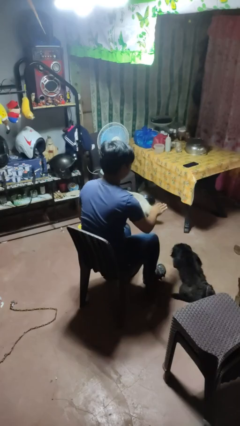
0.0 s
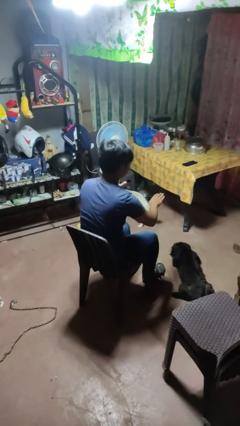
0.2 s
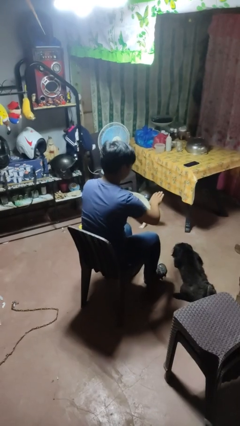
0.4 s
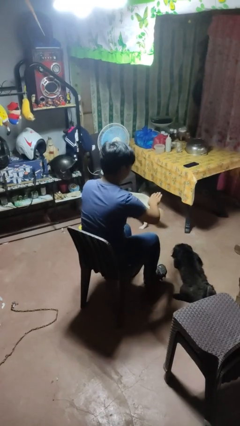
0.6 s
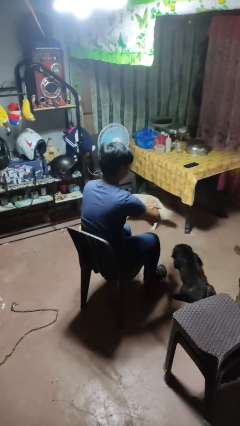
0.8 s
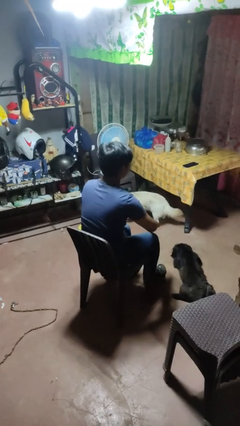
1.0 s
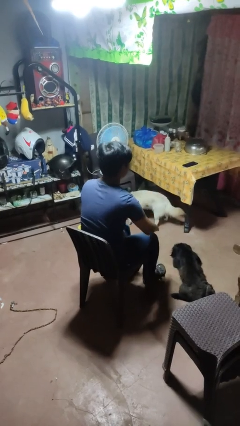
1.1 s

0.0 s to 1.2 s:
person swats bug

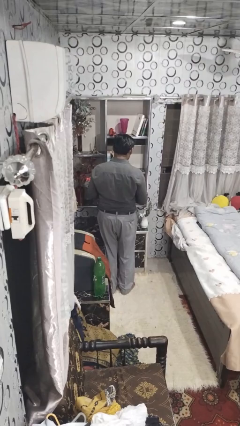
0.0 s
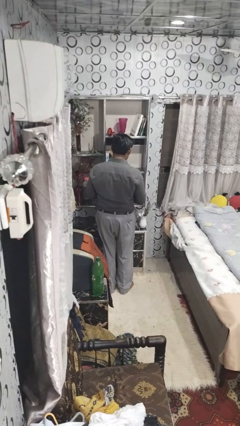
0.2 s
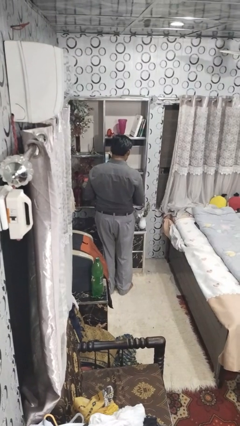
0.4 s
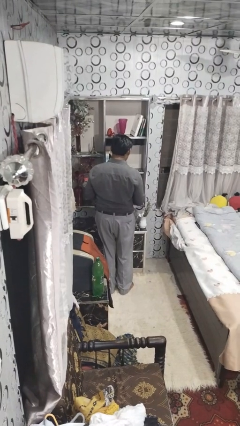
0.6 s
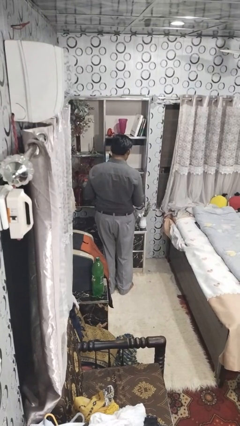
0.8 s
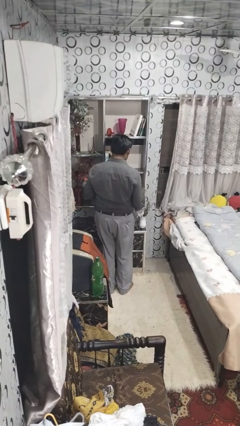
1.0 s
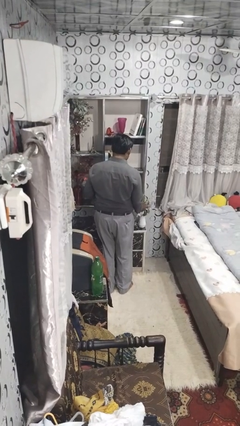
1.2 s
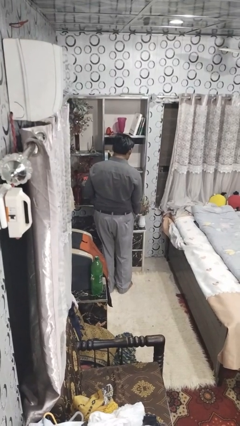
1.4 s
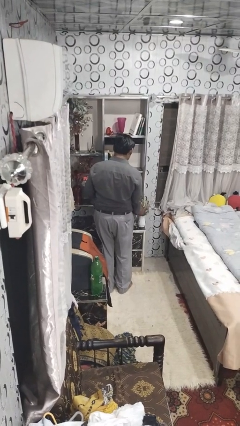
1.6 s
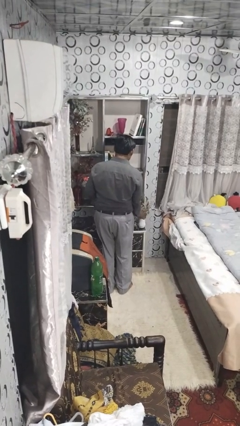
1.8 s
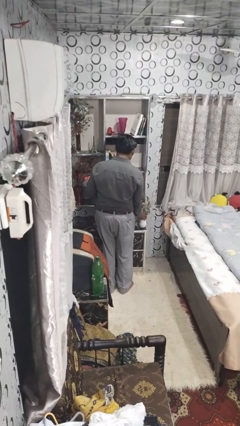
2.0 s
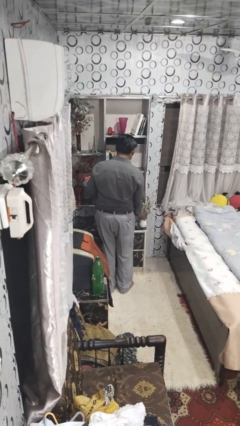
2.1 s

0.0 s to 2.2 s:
person arranges flowers in vase

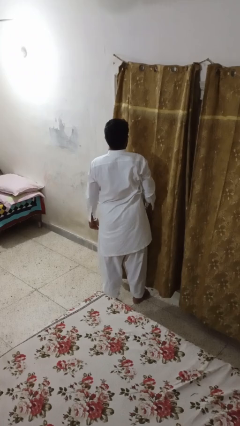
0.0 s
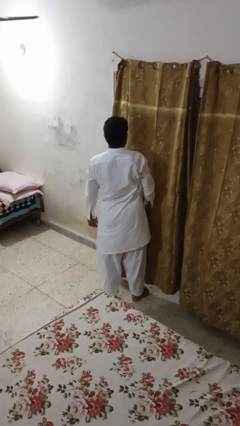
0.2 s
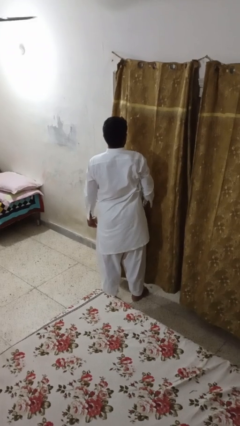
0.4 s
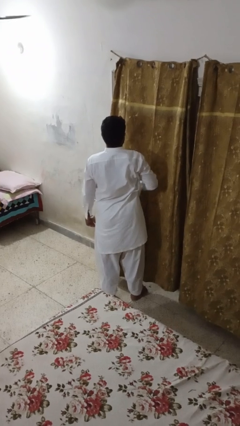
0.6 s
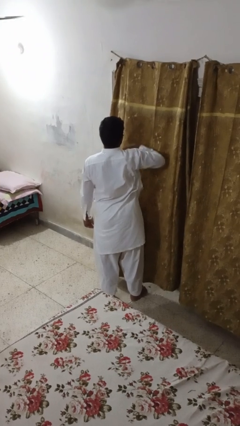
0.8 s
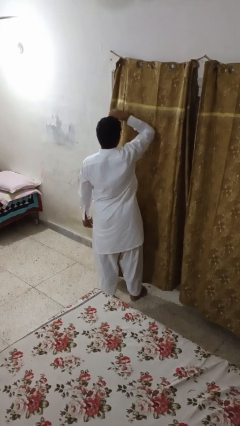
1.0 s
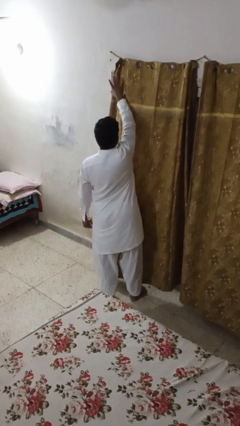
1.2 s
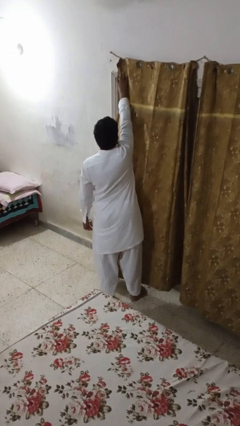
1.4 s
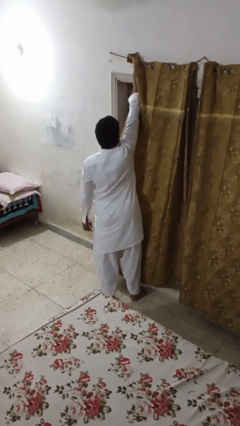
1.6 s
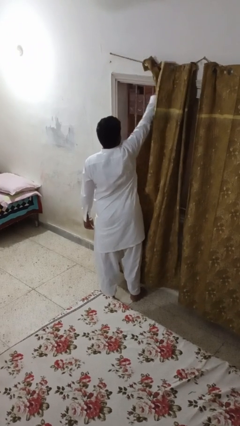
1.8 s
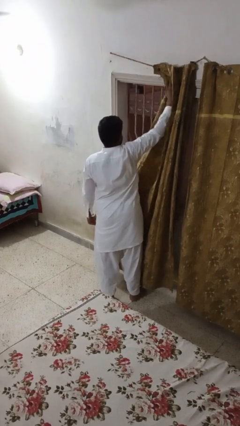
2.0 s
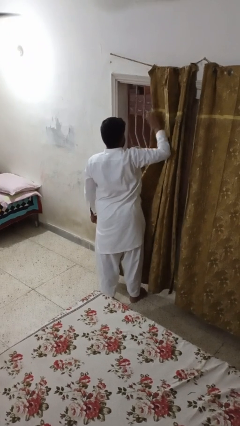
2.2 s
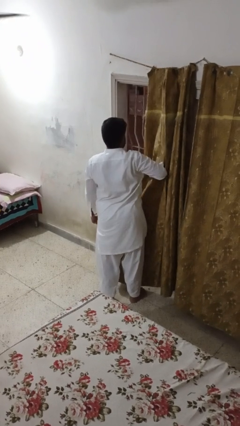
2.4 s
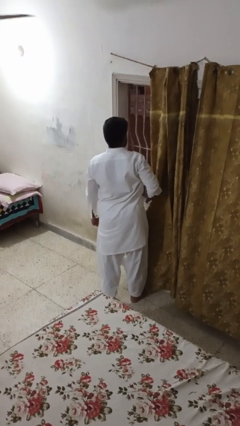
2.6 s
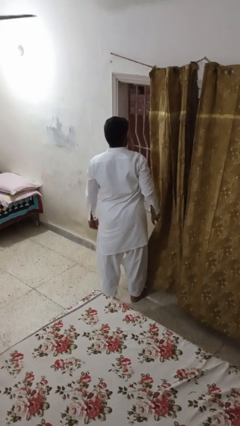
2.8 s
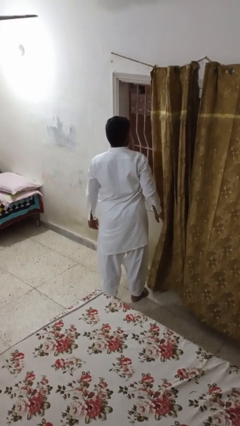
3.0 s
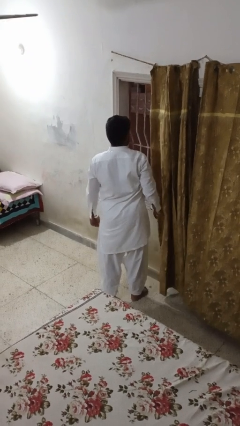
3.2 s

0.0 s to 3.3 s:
person opens curtains

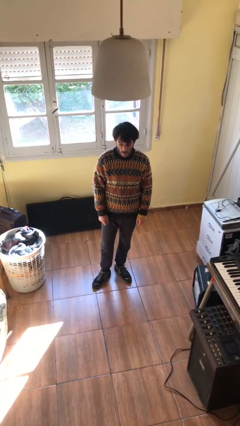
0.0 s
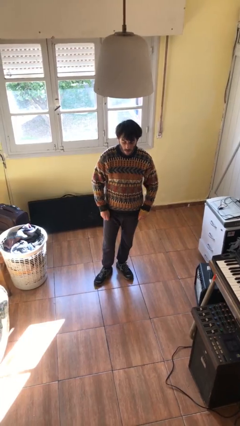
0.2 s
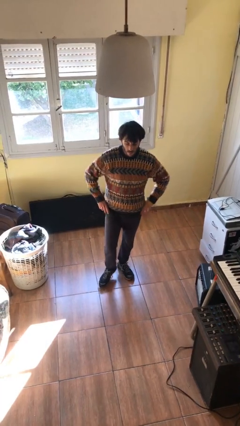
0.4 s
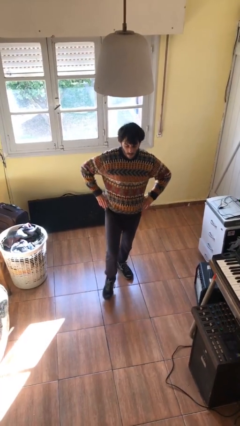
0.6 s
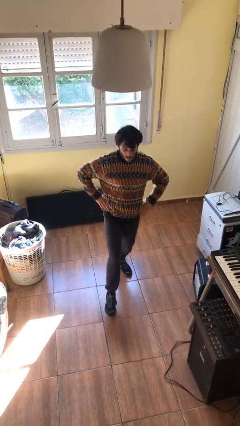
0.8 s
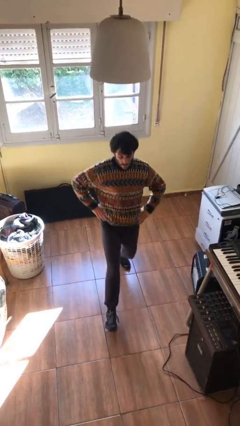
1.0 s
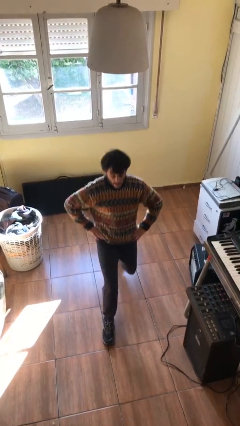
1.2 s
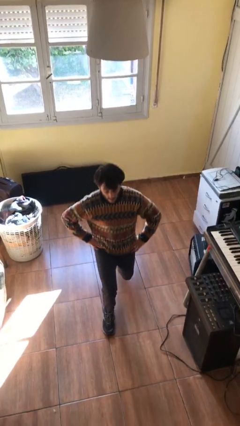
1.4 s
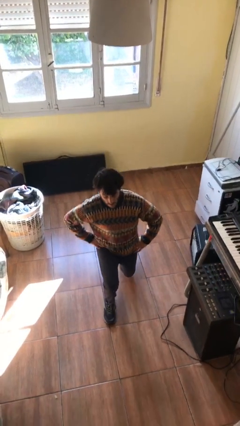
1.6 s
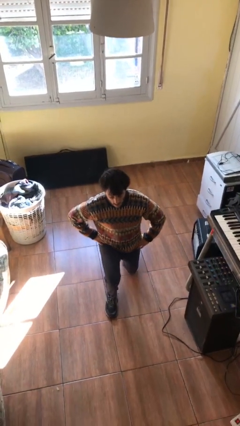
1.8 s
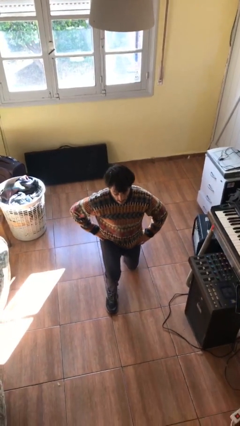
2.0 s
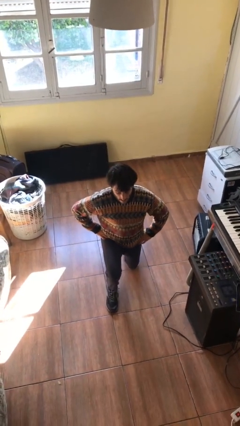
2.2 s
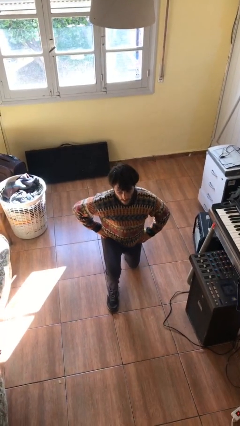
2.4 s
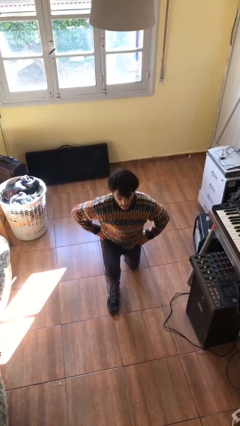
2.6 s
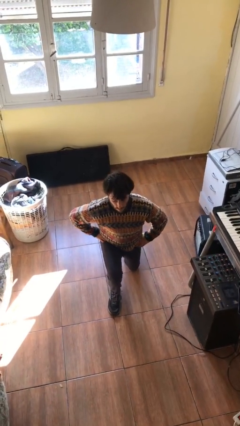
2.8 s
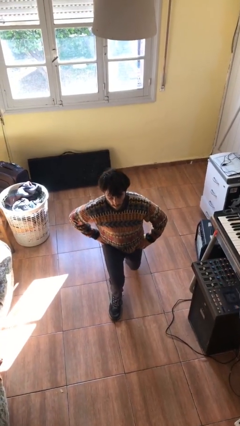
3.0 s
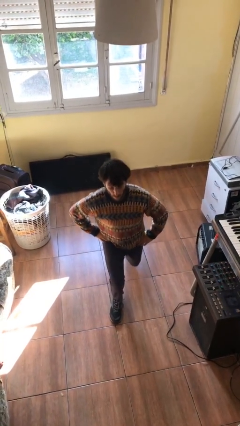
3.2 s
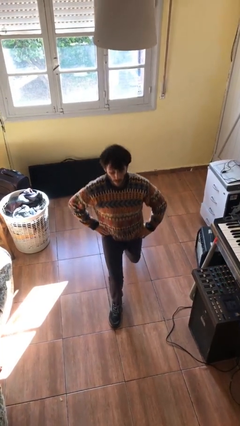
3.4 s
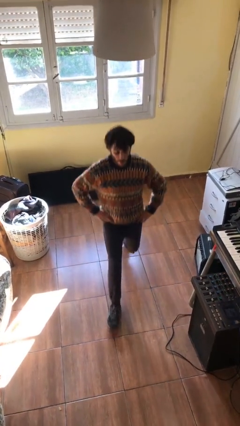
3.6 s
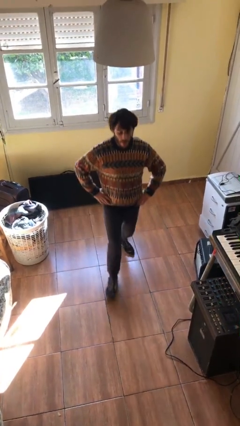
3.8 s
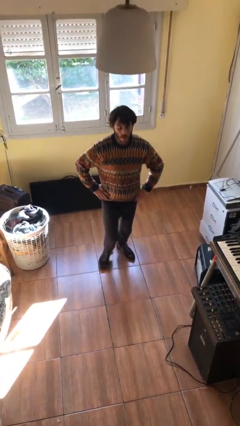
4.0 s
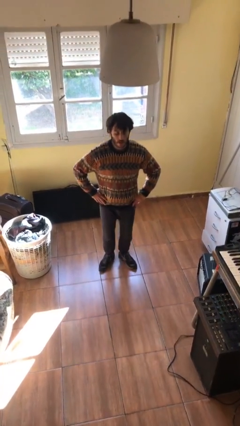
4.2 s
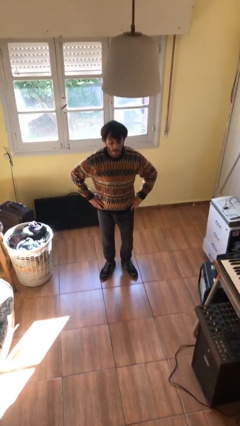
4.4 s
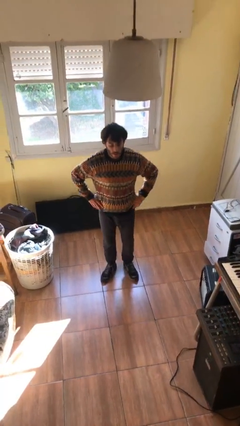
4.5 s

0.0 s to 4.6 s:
person exercises with lunges

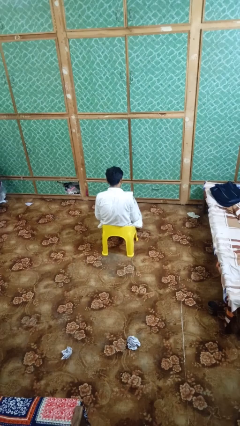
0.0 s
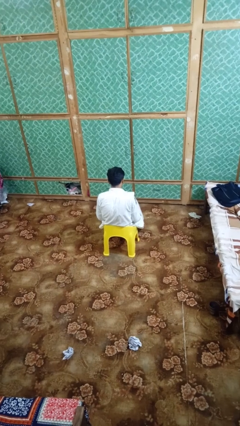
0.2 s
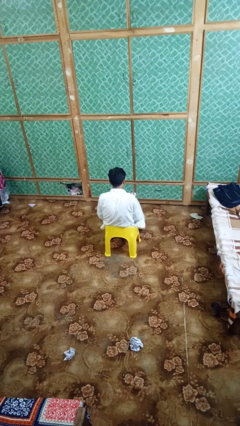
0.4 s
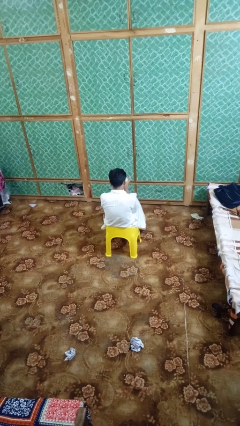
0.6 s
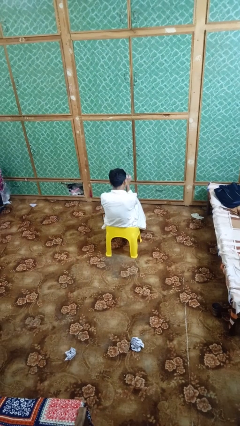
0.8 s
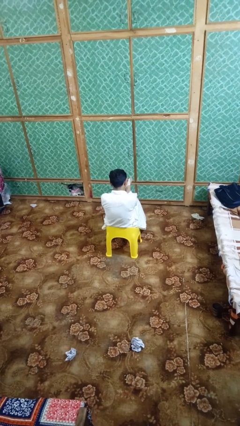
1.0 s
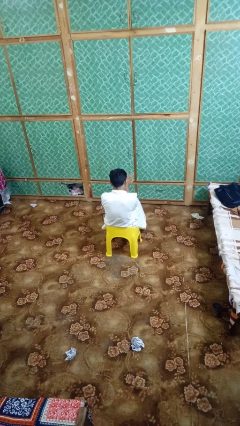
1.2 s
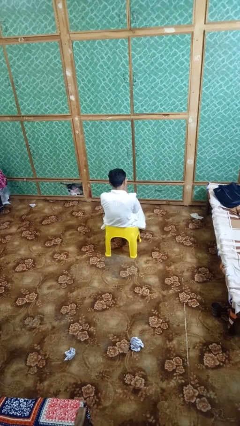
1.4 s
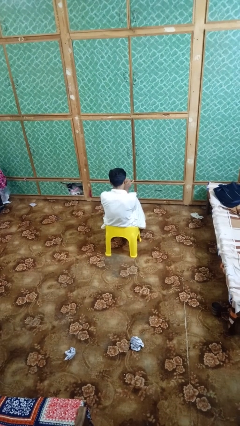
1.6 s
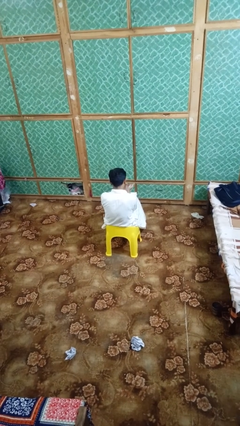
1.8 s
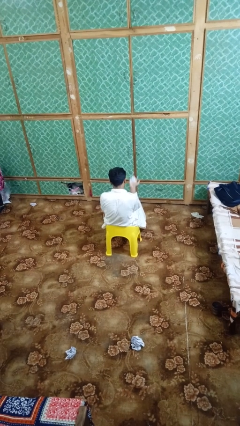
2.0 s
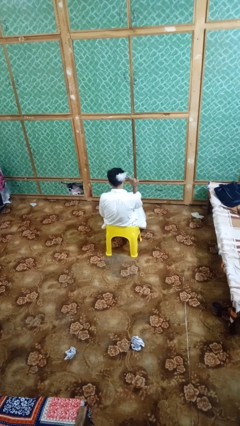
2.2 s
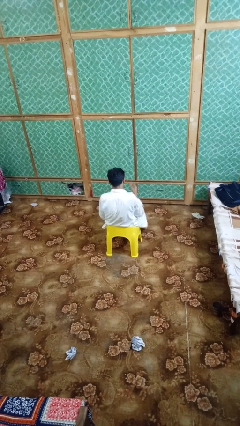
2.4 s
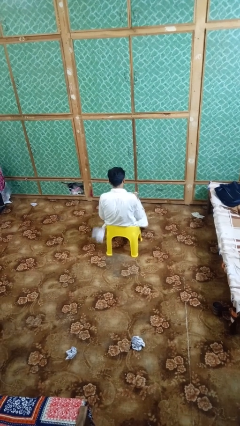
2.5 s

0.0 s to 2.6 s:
person crumples paper

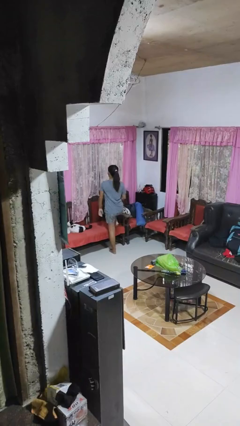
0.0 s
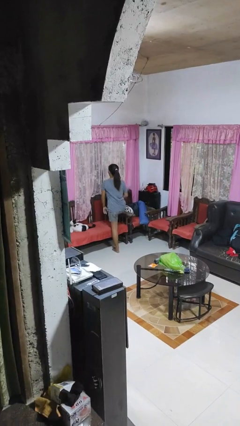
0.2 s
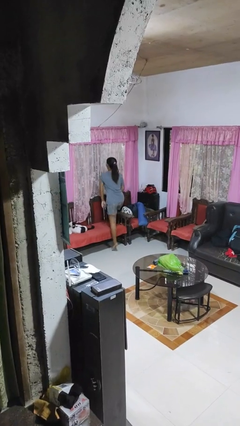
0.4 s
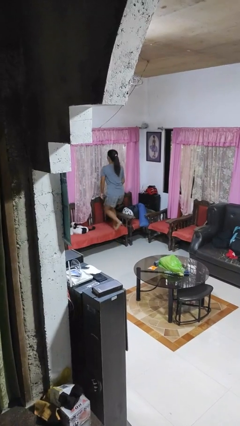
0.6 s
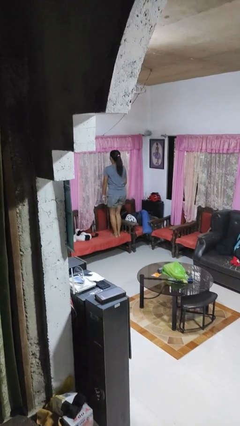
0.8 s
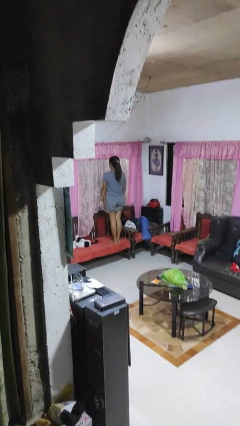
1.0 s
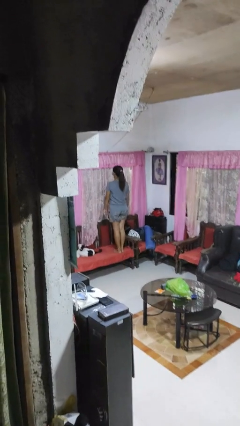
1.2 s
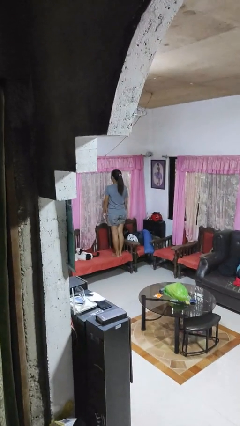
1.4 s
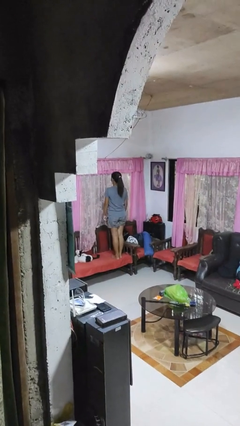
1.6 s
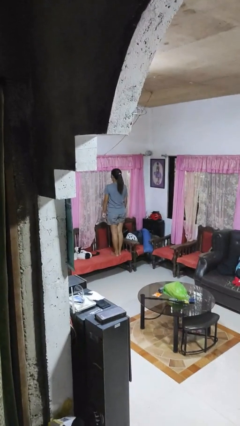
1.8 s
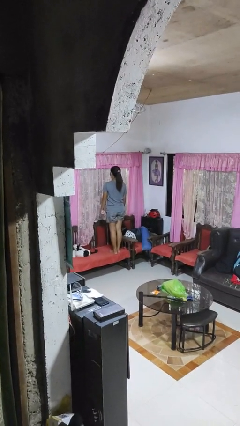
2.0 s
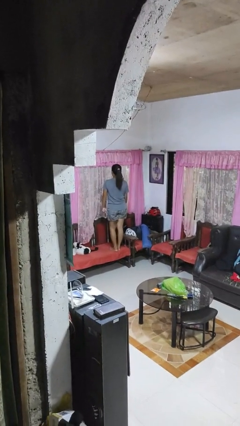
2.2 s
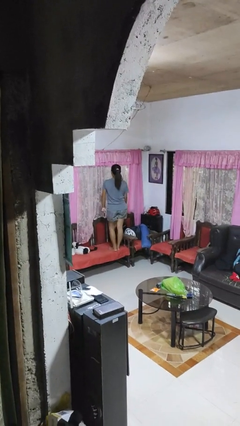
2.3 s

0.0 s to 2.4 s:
person climbs on chair

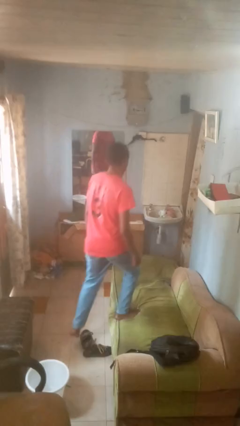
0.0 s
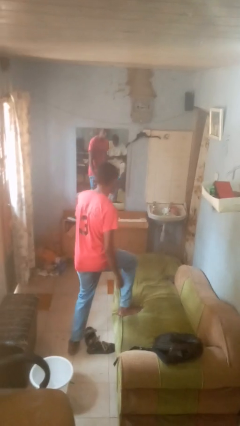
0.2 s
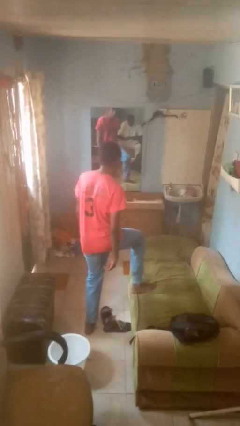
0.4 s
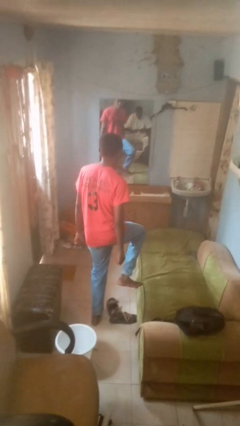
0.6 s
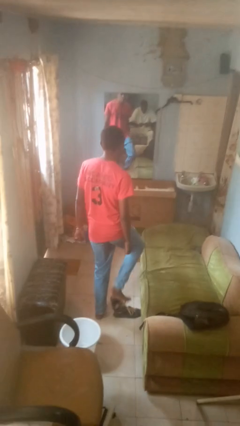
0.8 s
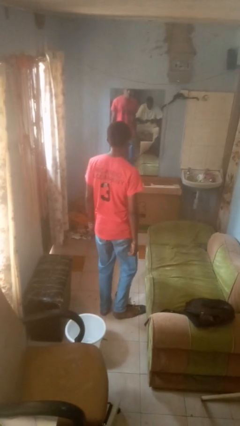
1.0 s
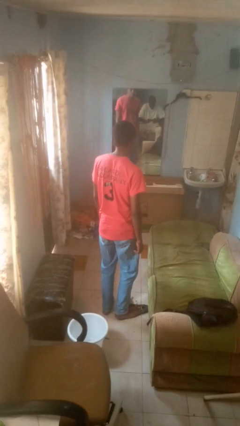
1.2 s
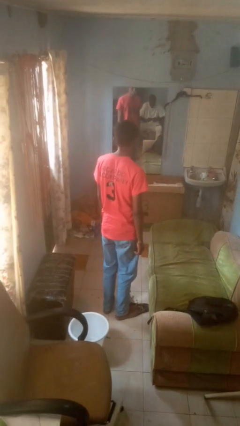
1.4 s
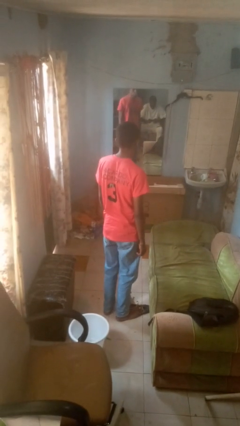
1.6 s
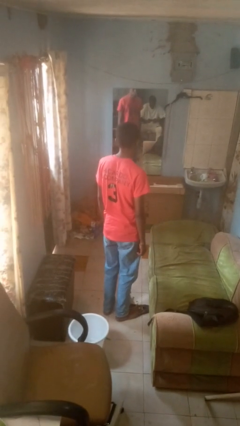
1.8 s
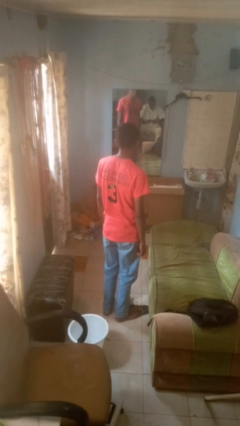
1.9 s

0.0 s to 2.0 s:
person climbs off couch
